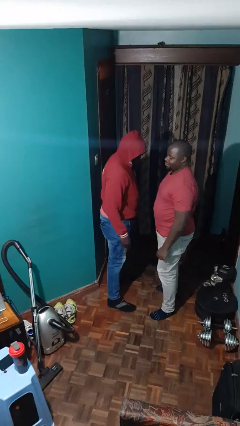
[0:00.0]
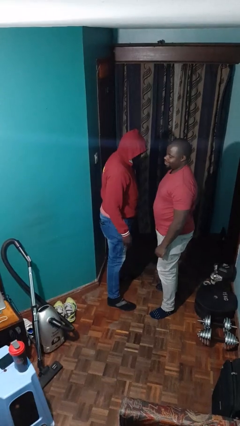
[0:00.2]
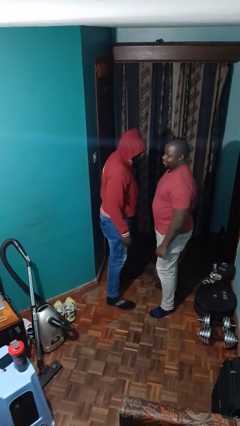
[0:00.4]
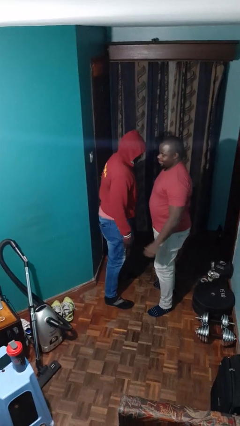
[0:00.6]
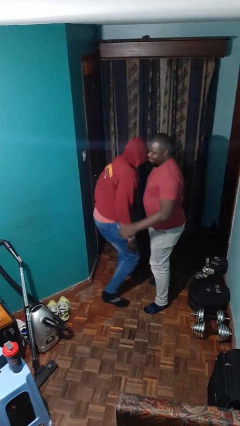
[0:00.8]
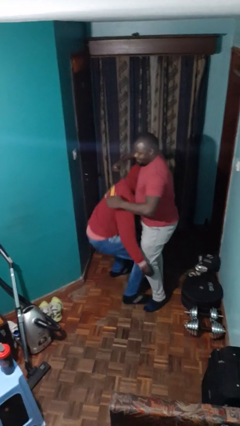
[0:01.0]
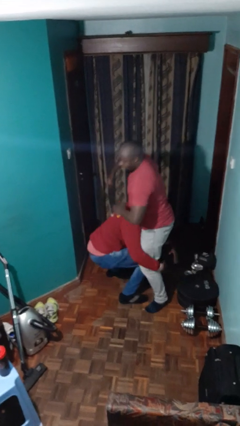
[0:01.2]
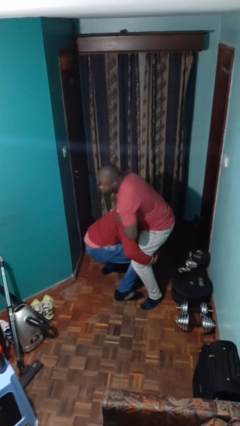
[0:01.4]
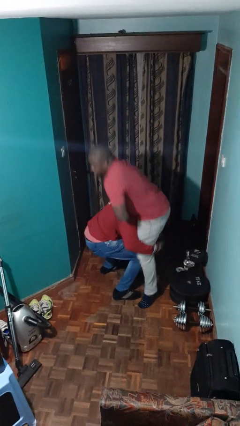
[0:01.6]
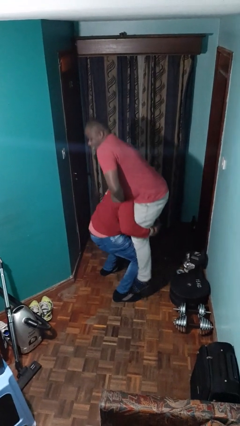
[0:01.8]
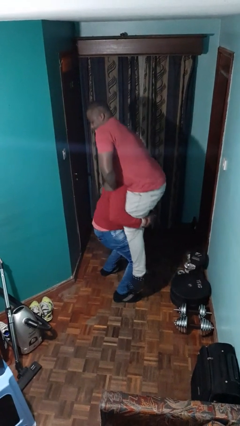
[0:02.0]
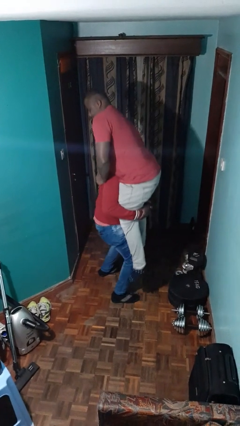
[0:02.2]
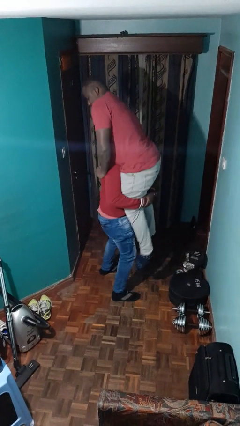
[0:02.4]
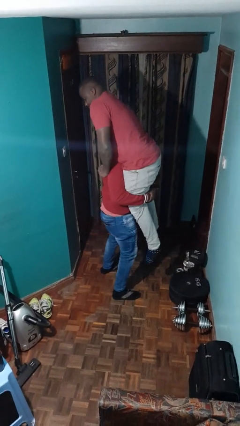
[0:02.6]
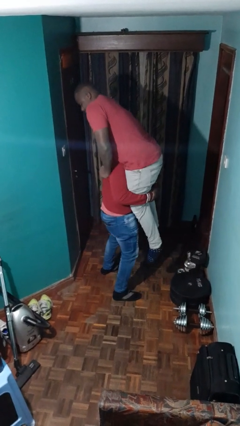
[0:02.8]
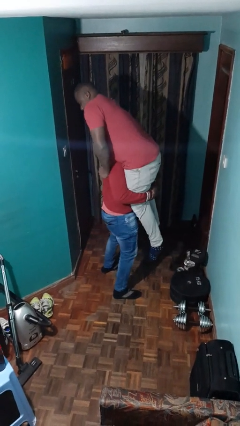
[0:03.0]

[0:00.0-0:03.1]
person picks up person

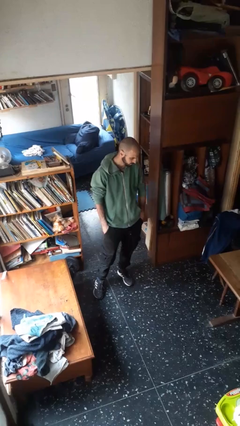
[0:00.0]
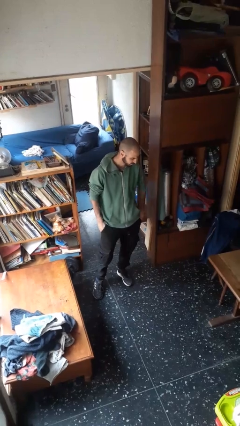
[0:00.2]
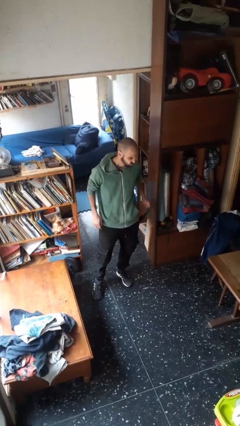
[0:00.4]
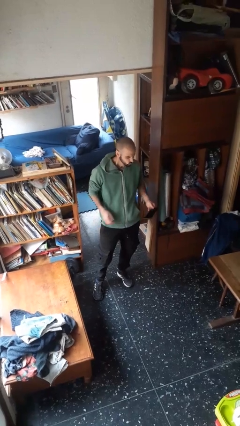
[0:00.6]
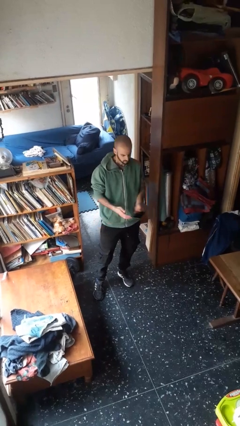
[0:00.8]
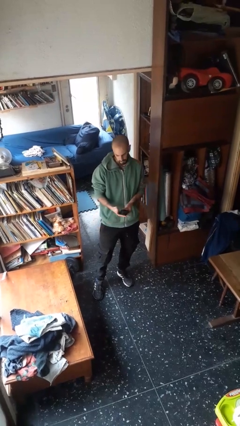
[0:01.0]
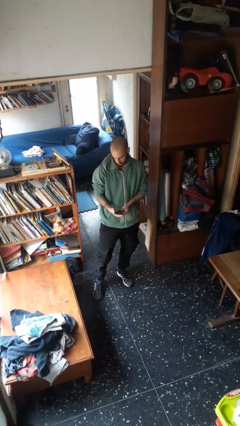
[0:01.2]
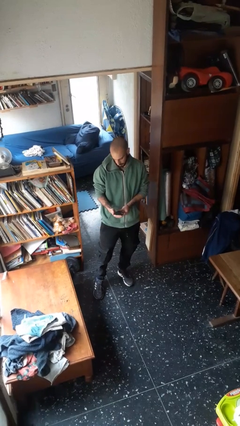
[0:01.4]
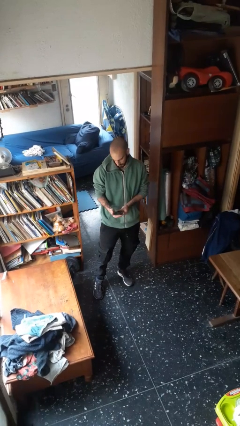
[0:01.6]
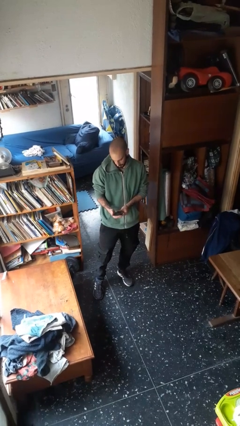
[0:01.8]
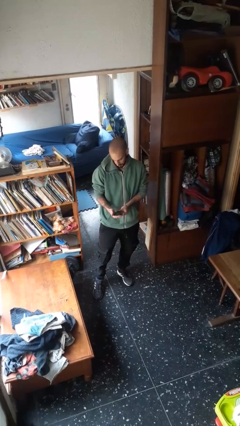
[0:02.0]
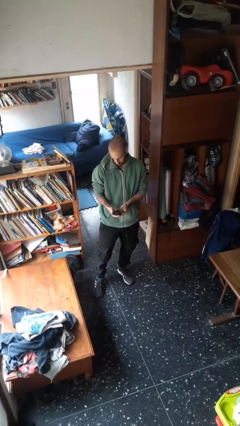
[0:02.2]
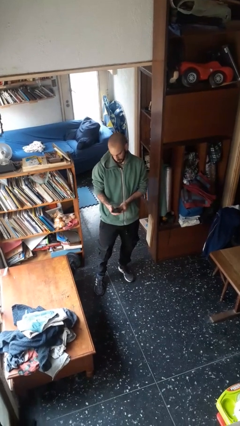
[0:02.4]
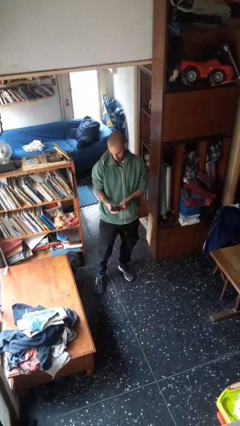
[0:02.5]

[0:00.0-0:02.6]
person takes phone from pocket

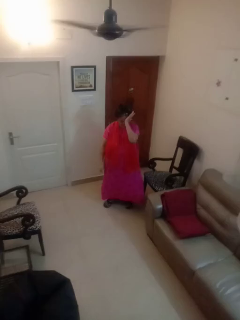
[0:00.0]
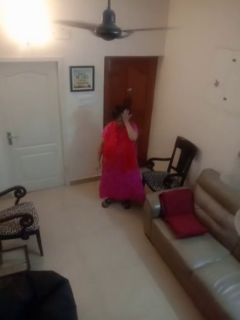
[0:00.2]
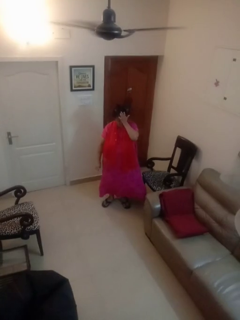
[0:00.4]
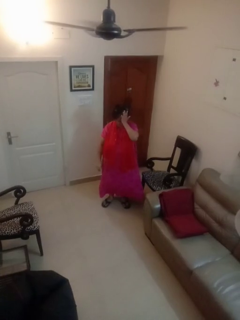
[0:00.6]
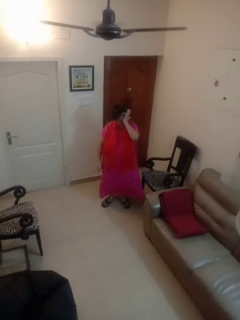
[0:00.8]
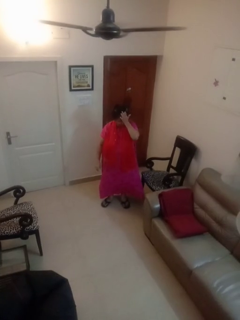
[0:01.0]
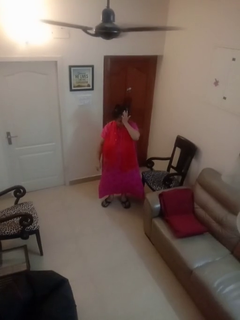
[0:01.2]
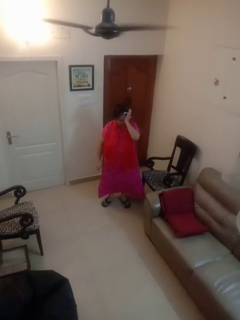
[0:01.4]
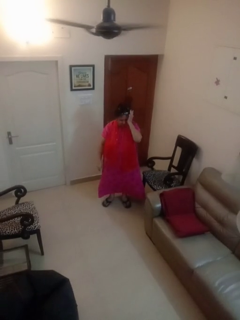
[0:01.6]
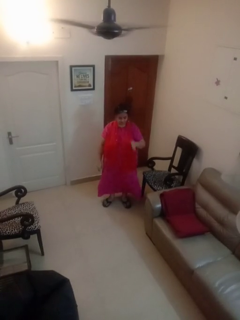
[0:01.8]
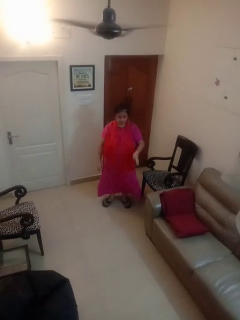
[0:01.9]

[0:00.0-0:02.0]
person rubs eyes

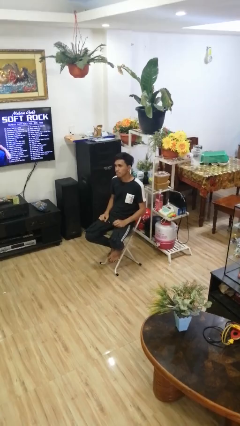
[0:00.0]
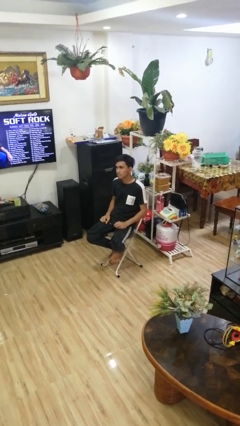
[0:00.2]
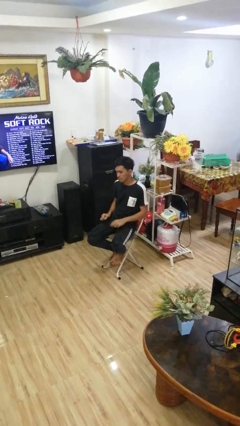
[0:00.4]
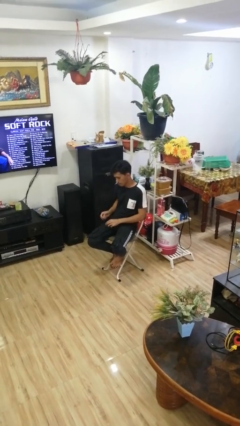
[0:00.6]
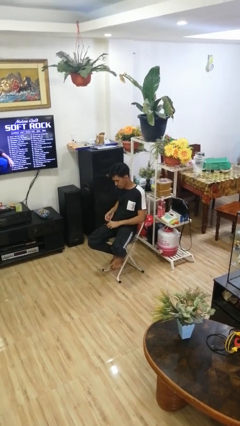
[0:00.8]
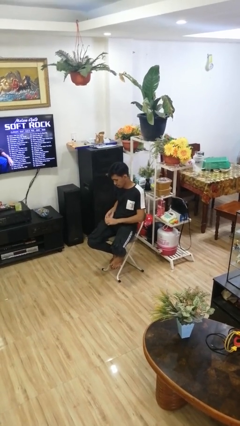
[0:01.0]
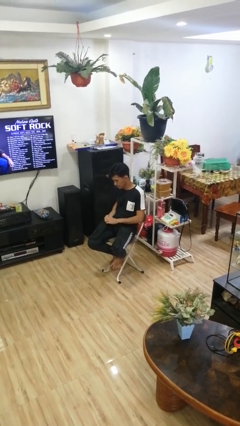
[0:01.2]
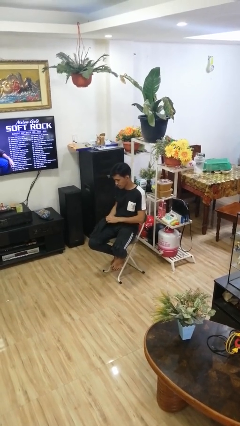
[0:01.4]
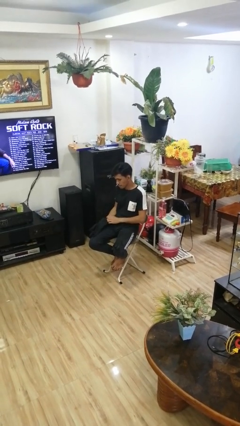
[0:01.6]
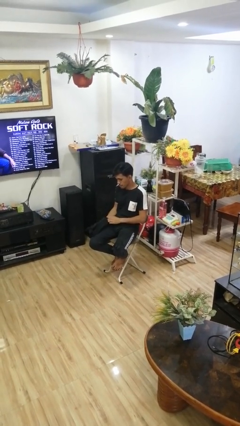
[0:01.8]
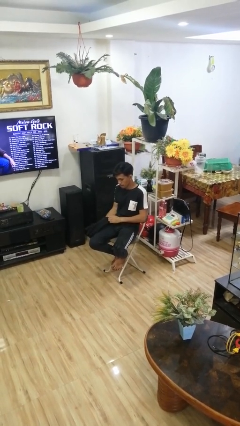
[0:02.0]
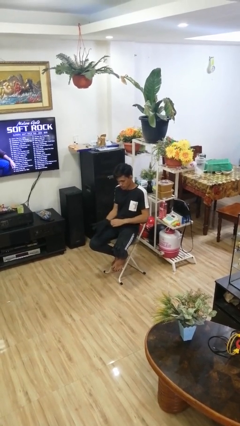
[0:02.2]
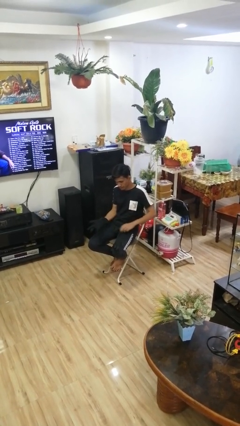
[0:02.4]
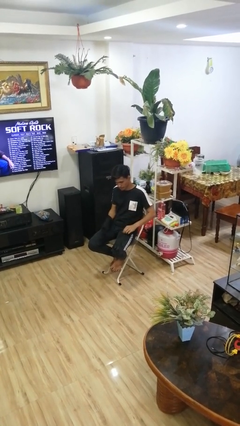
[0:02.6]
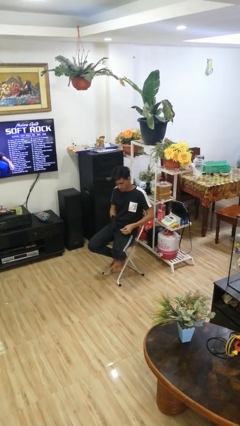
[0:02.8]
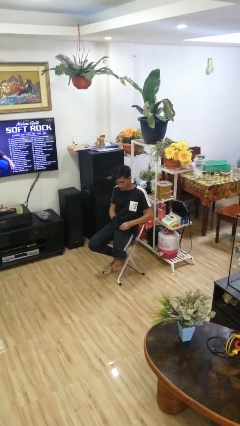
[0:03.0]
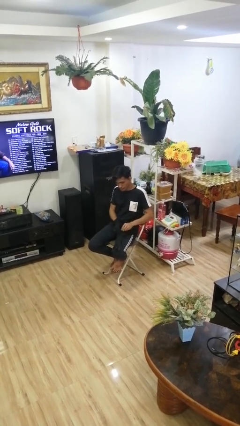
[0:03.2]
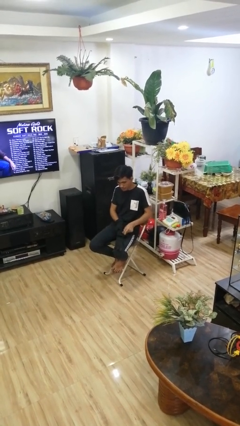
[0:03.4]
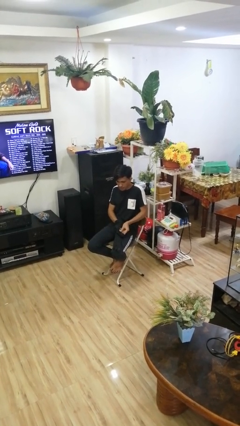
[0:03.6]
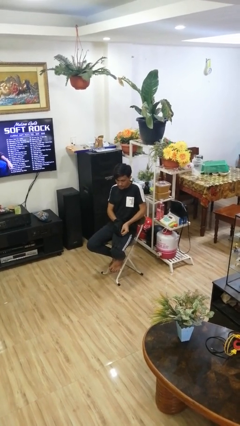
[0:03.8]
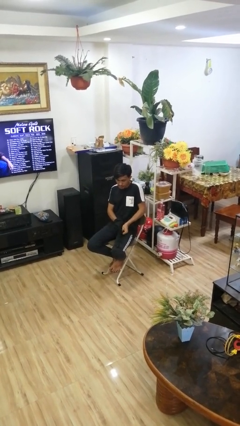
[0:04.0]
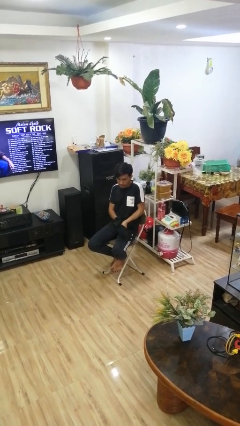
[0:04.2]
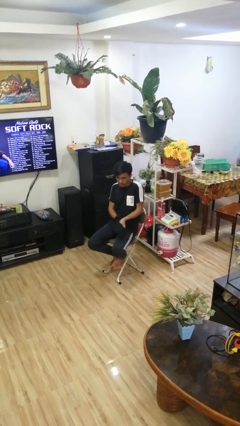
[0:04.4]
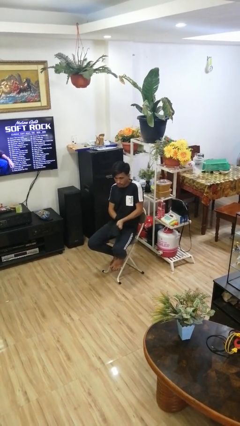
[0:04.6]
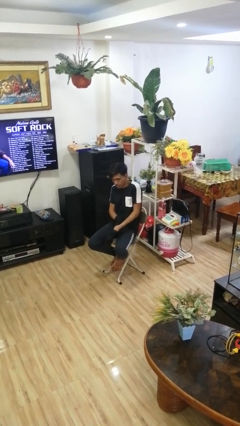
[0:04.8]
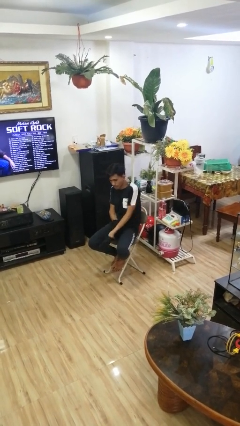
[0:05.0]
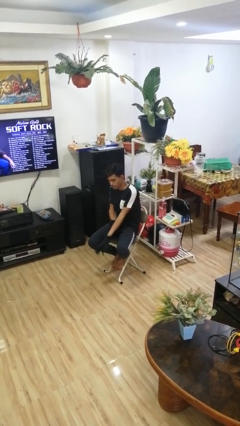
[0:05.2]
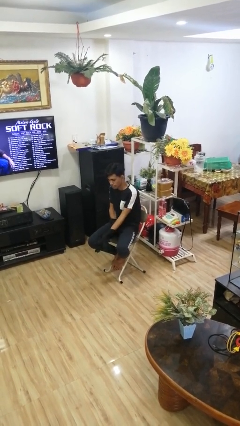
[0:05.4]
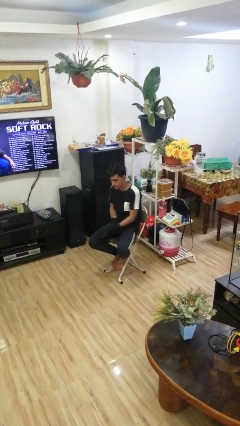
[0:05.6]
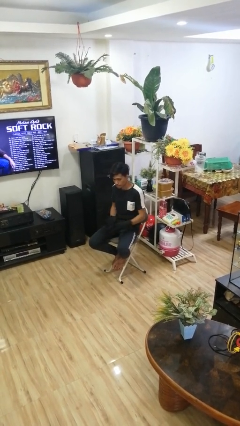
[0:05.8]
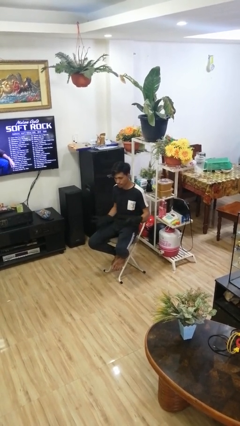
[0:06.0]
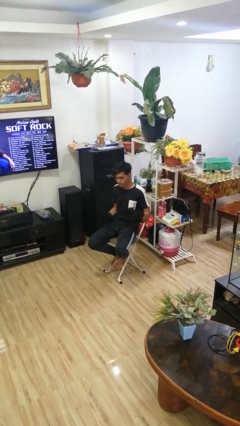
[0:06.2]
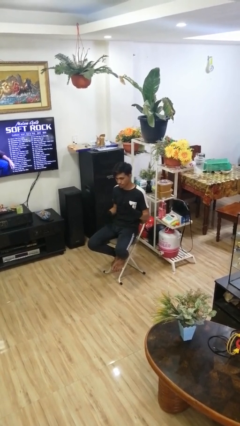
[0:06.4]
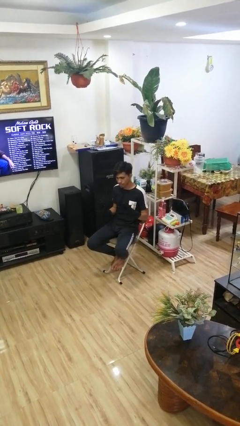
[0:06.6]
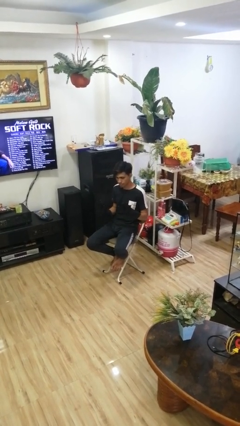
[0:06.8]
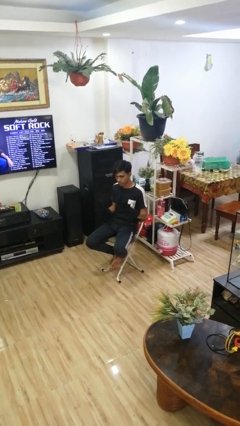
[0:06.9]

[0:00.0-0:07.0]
person puts on gloves

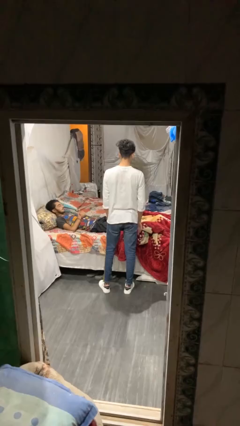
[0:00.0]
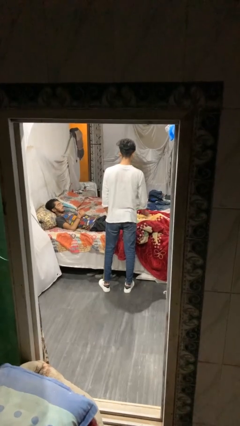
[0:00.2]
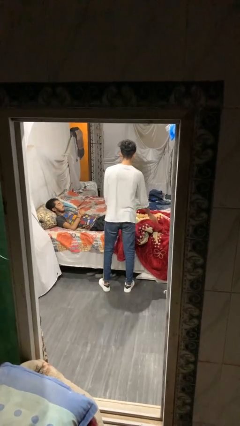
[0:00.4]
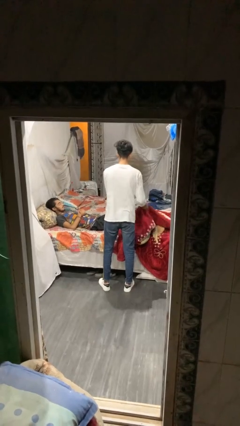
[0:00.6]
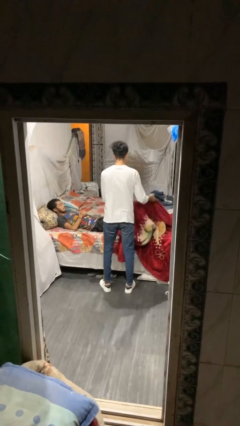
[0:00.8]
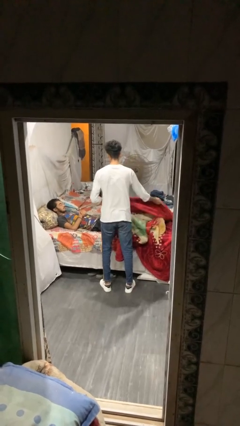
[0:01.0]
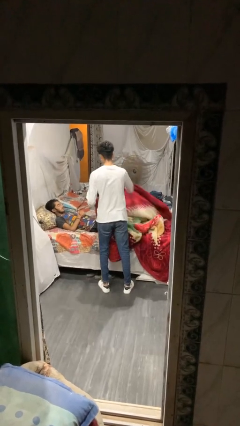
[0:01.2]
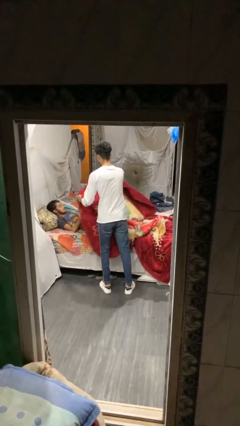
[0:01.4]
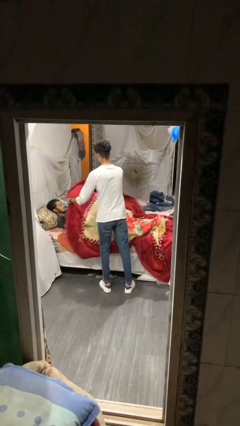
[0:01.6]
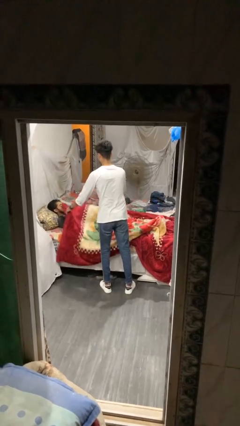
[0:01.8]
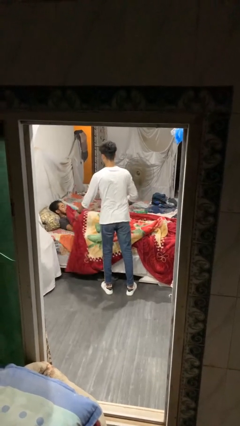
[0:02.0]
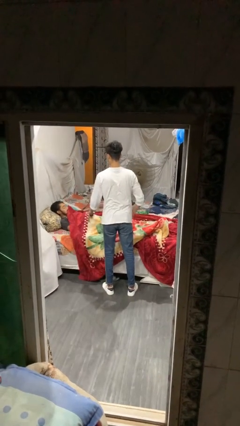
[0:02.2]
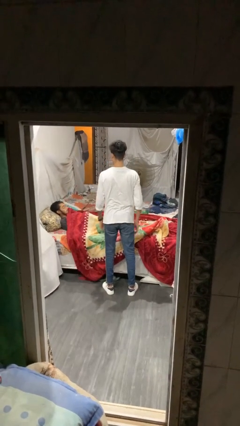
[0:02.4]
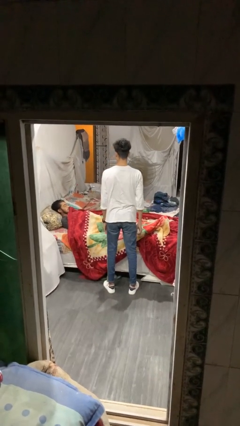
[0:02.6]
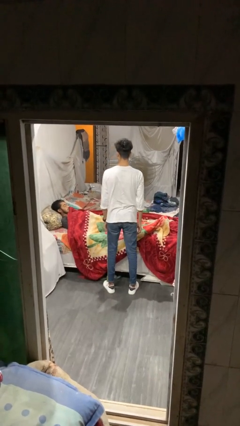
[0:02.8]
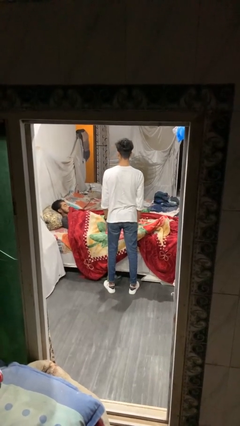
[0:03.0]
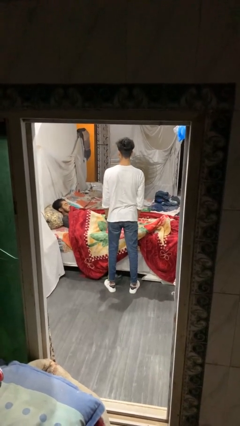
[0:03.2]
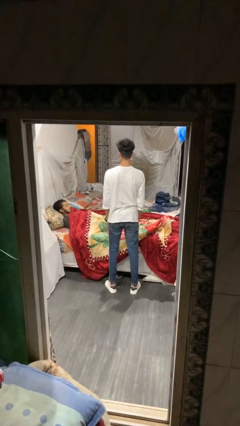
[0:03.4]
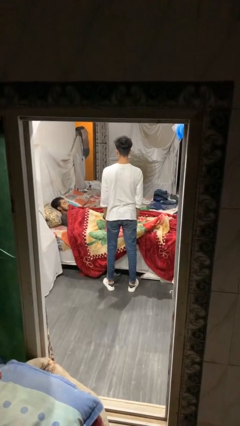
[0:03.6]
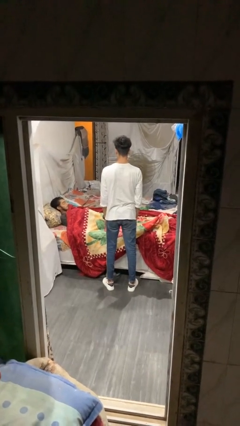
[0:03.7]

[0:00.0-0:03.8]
person covers friend with blanket
